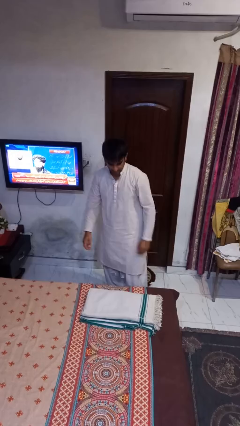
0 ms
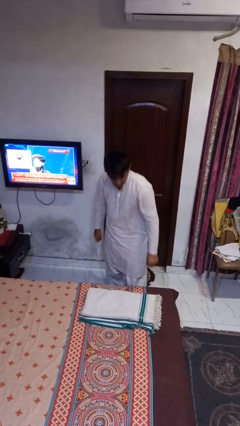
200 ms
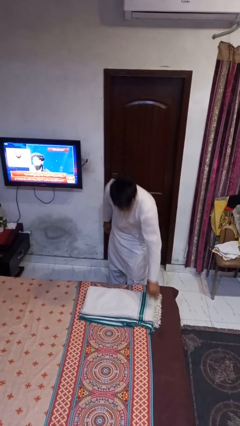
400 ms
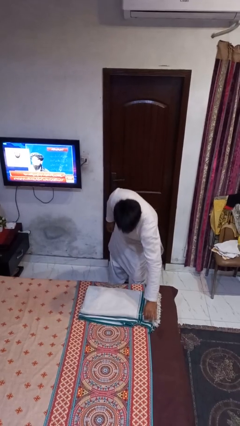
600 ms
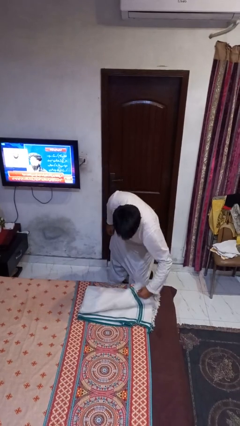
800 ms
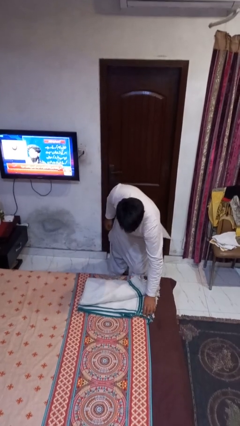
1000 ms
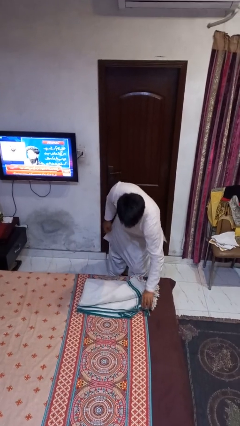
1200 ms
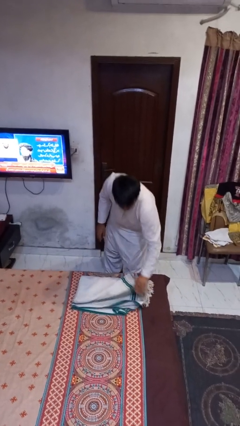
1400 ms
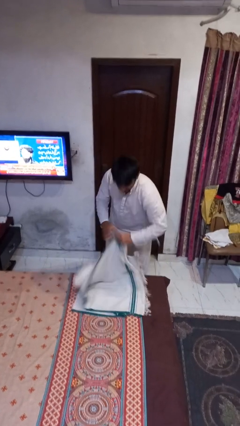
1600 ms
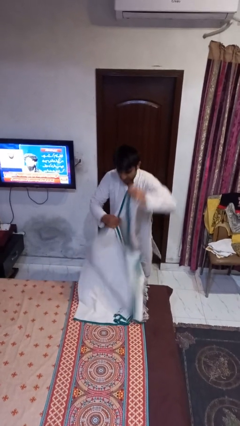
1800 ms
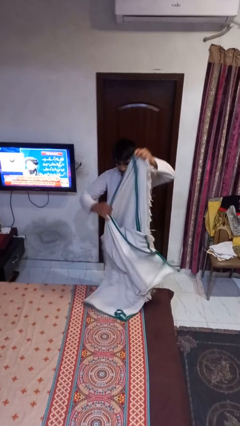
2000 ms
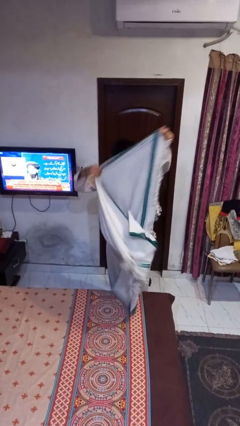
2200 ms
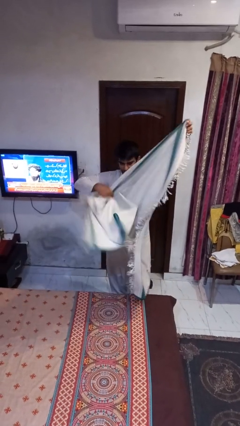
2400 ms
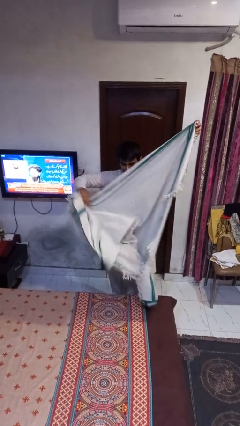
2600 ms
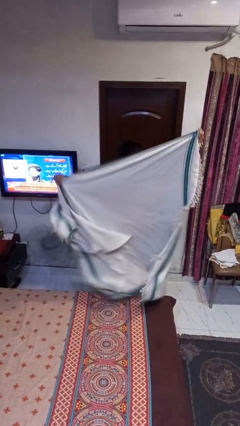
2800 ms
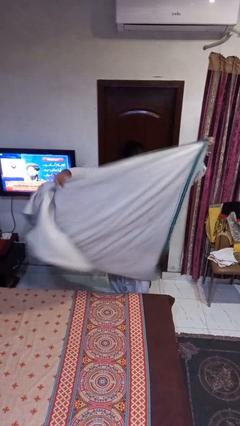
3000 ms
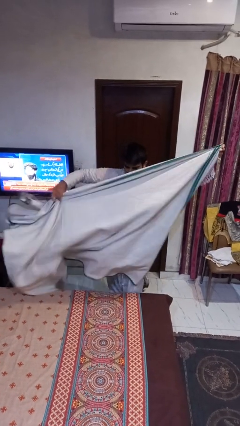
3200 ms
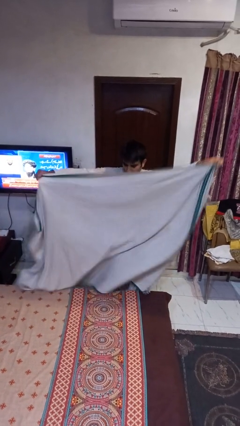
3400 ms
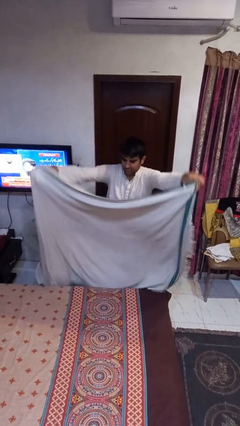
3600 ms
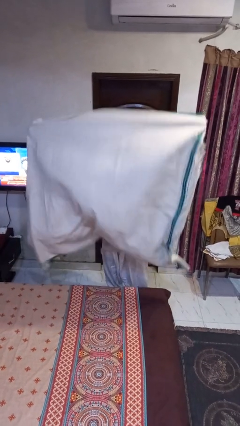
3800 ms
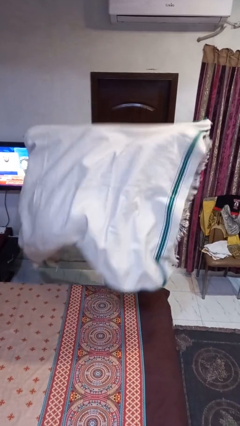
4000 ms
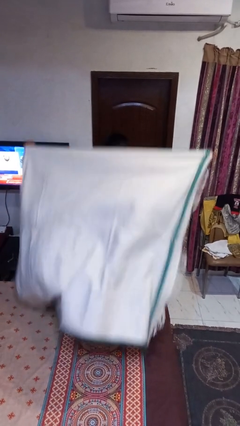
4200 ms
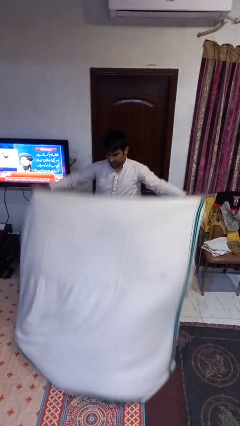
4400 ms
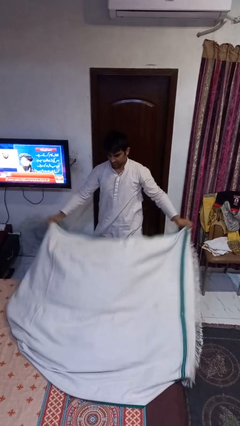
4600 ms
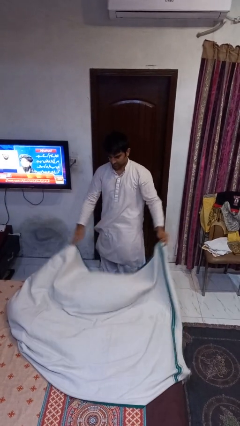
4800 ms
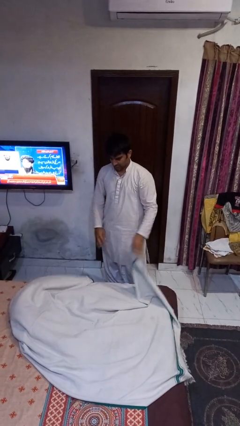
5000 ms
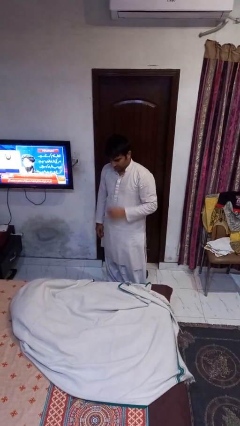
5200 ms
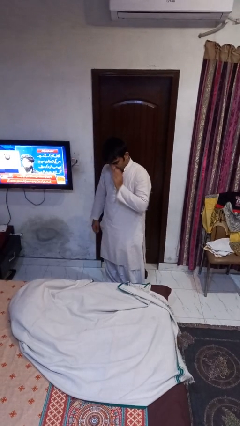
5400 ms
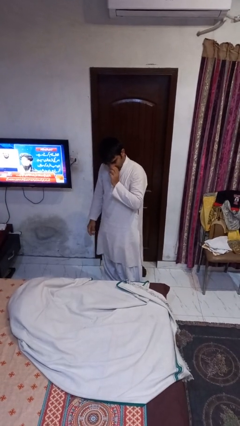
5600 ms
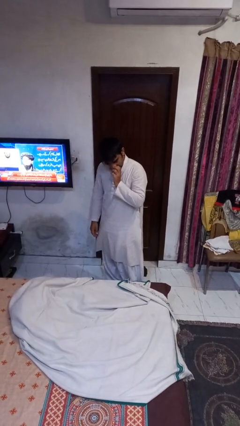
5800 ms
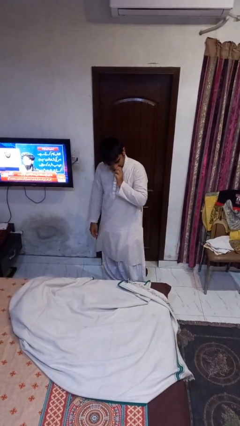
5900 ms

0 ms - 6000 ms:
person unfolds blanket

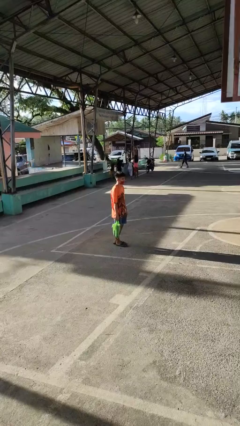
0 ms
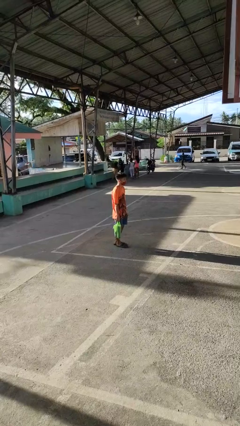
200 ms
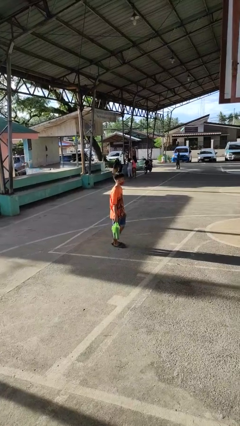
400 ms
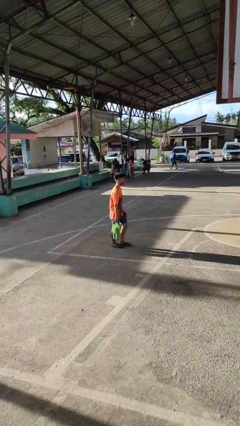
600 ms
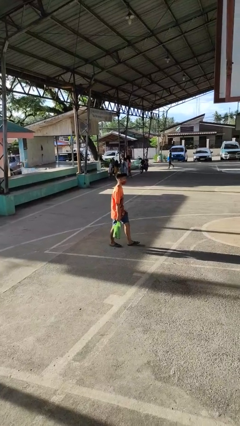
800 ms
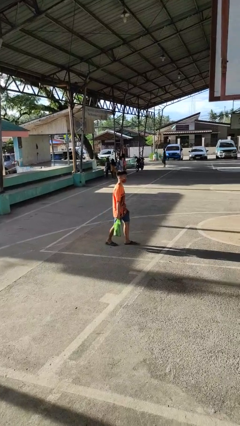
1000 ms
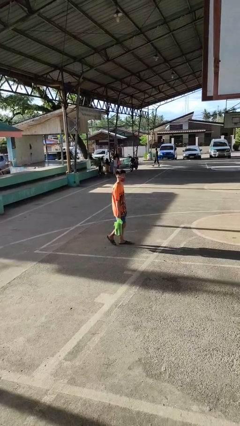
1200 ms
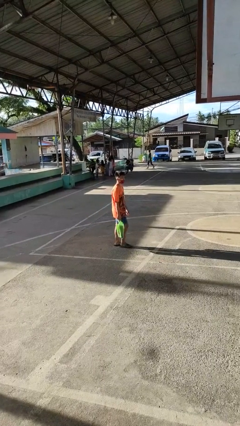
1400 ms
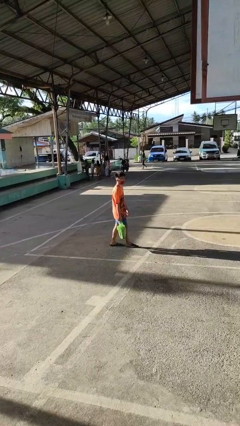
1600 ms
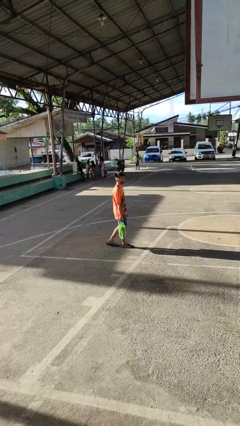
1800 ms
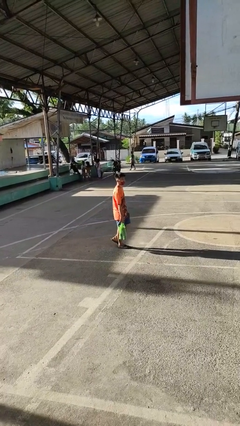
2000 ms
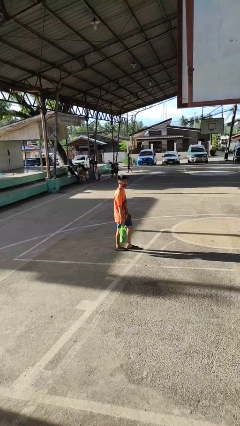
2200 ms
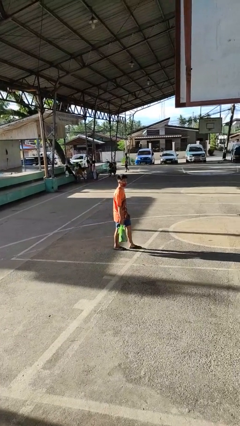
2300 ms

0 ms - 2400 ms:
person carries groceries

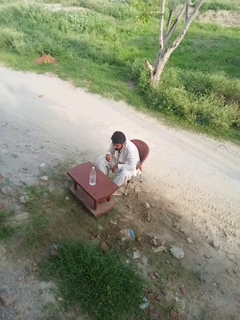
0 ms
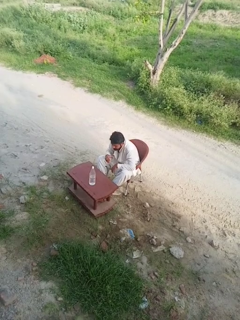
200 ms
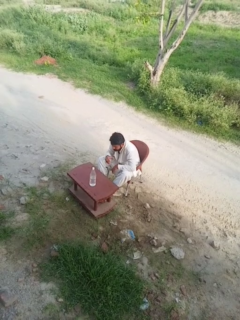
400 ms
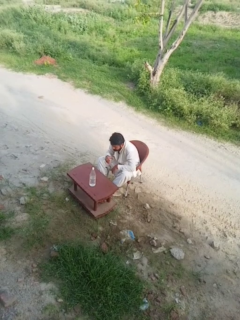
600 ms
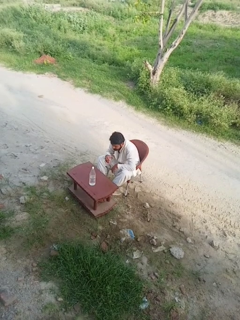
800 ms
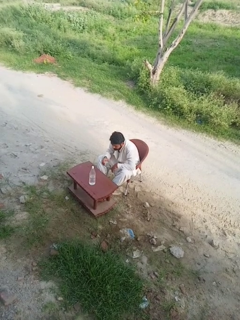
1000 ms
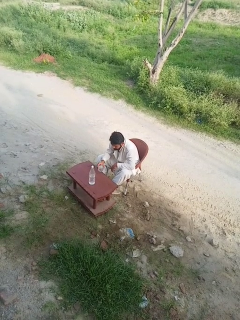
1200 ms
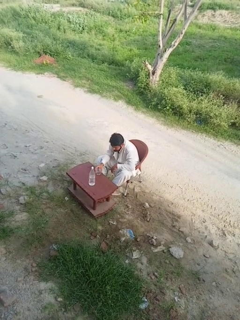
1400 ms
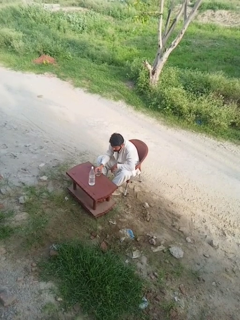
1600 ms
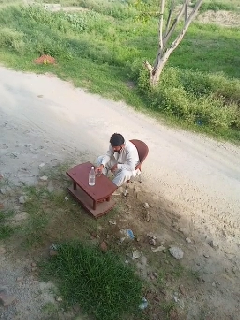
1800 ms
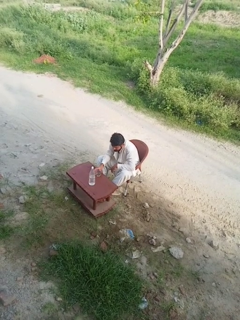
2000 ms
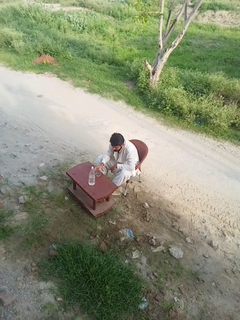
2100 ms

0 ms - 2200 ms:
person puts down object on table

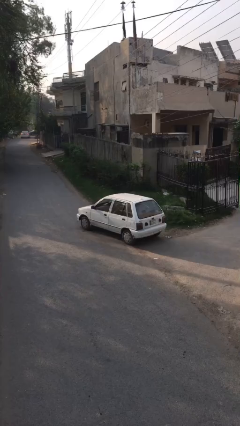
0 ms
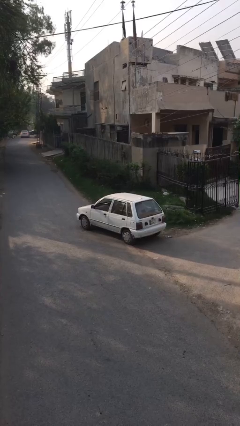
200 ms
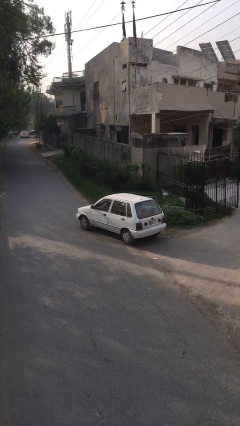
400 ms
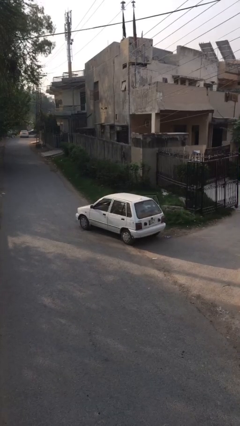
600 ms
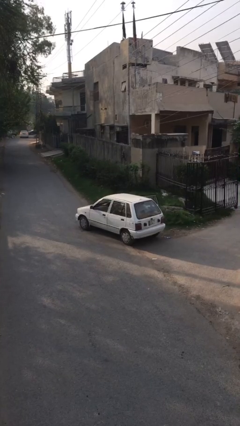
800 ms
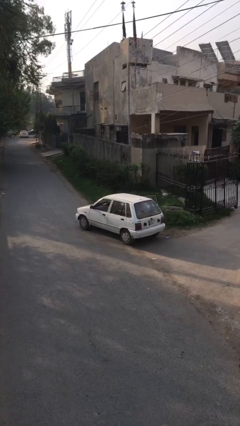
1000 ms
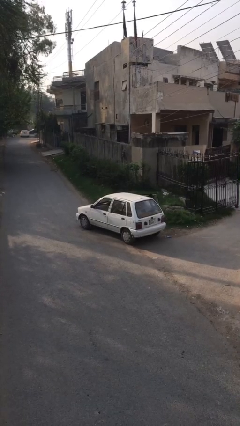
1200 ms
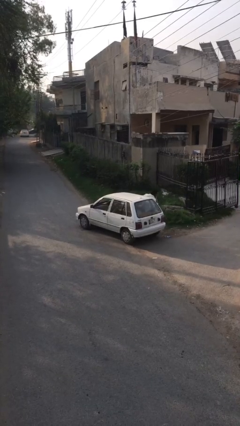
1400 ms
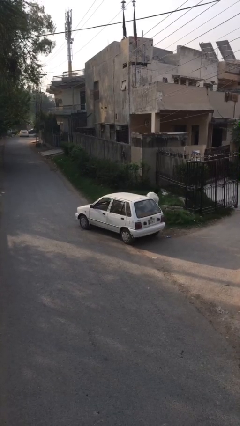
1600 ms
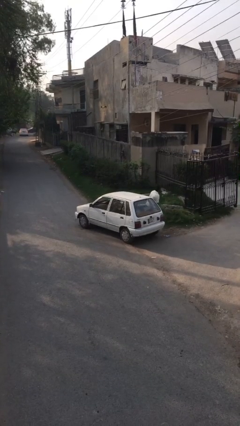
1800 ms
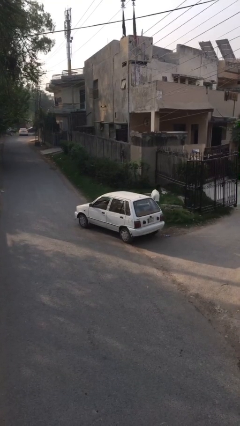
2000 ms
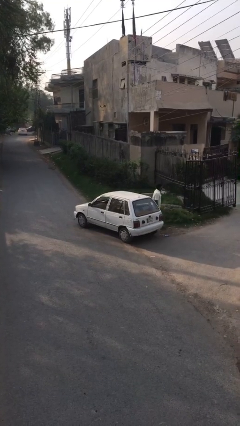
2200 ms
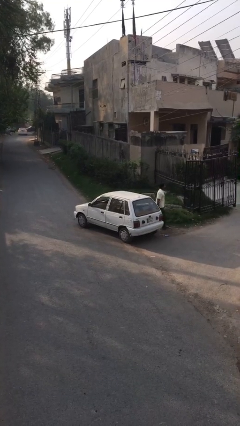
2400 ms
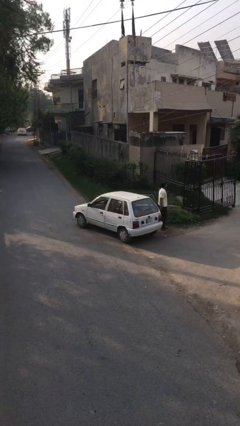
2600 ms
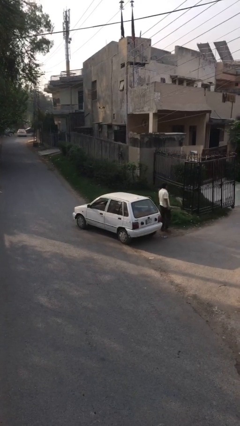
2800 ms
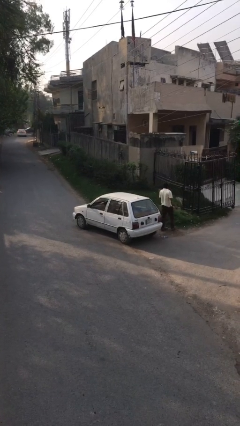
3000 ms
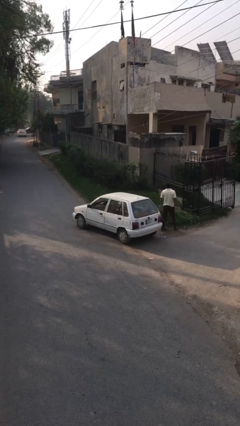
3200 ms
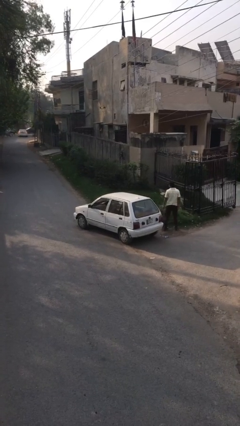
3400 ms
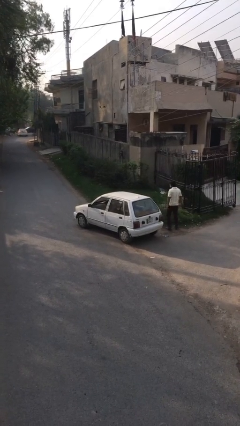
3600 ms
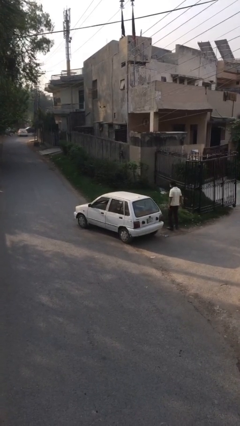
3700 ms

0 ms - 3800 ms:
car drops off person

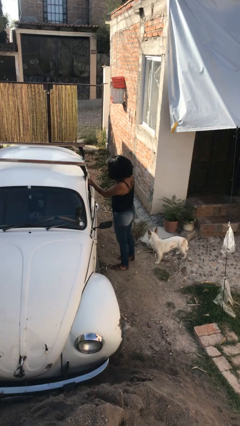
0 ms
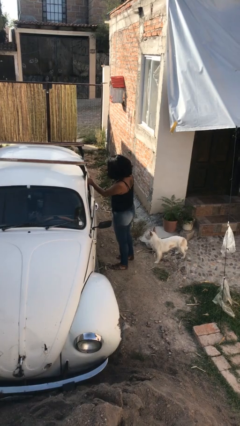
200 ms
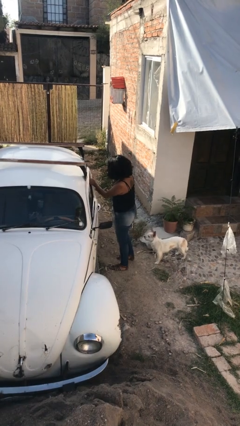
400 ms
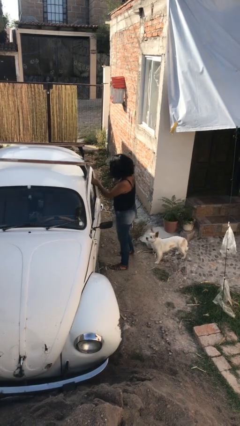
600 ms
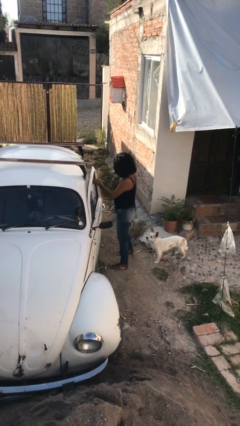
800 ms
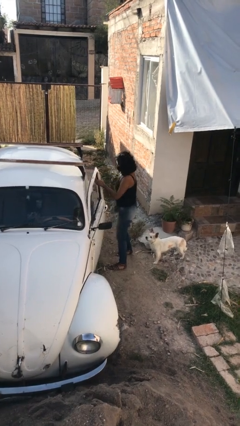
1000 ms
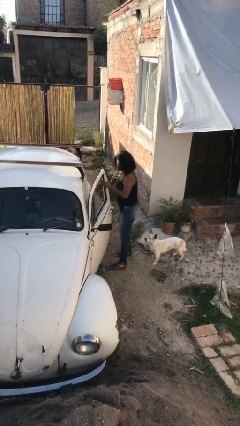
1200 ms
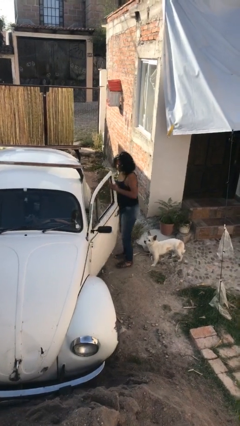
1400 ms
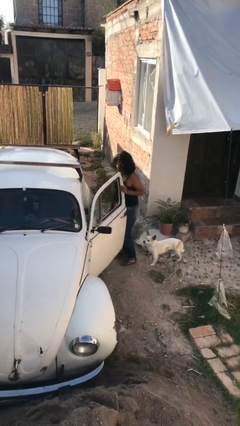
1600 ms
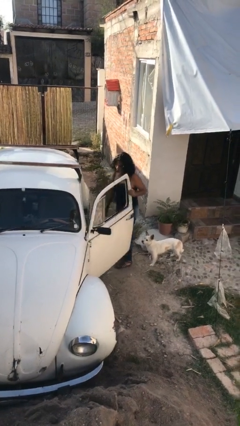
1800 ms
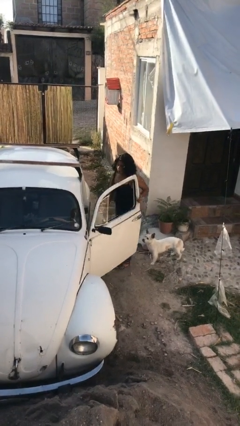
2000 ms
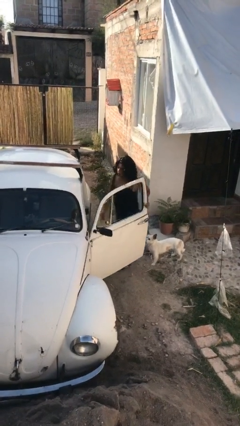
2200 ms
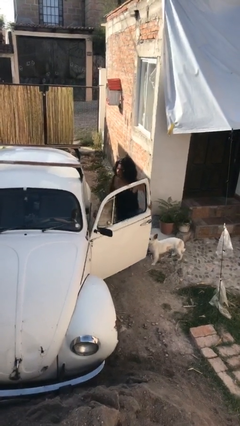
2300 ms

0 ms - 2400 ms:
person opens car door

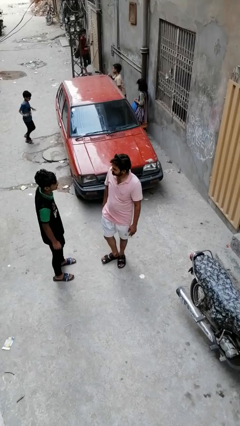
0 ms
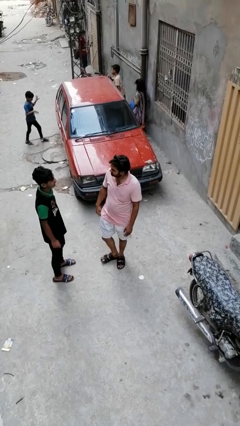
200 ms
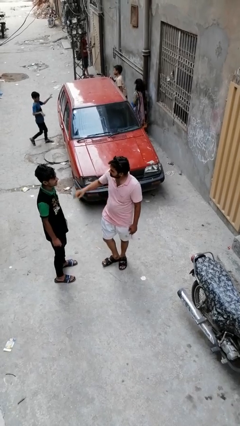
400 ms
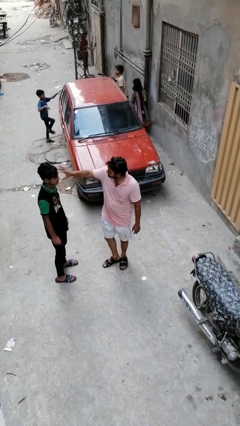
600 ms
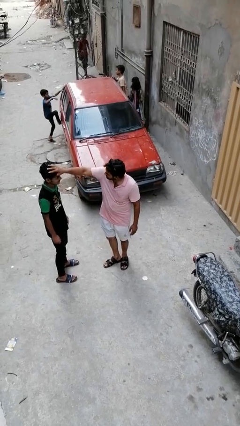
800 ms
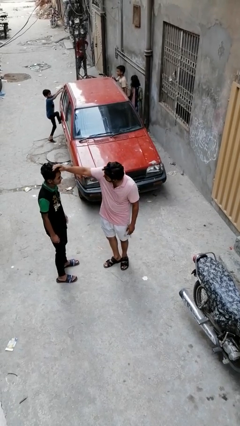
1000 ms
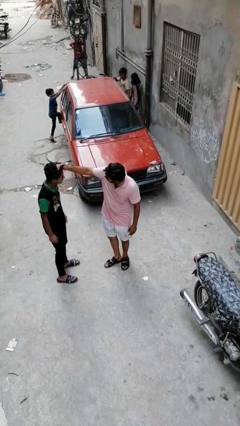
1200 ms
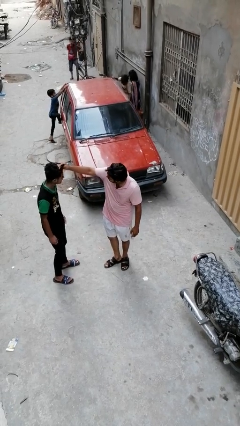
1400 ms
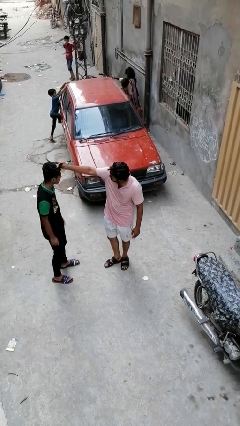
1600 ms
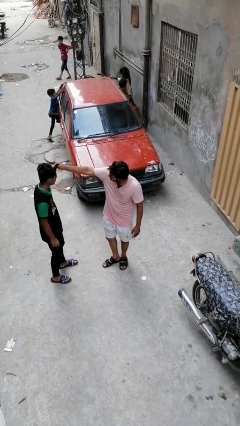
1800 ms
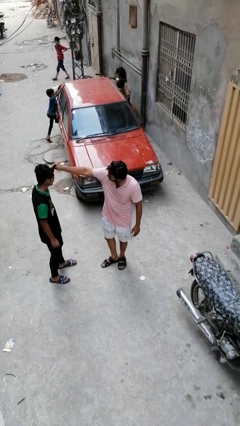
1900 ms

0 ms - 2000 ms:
person grabs person by hair
